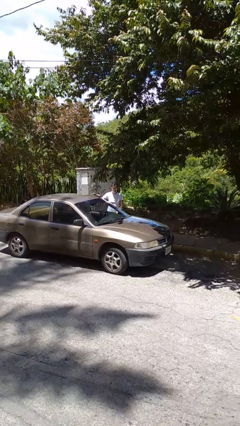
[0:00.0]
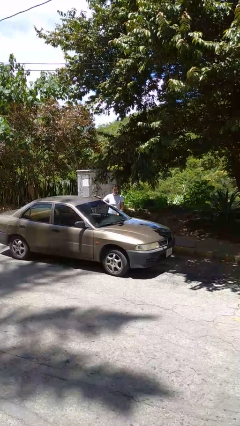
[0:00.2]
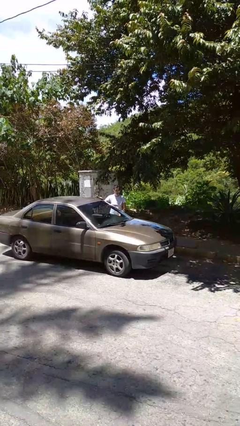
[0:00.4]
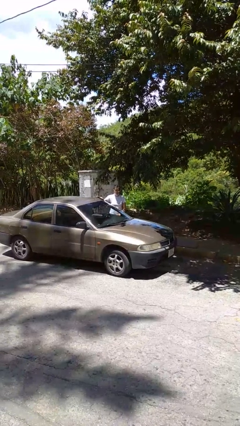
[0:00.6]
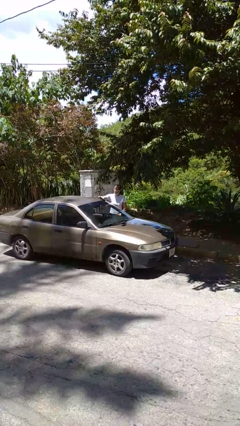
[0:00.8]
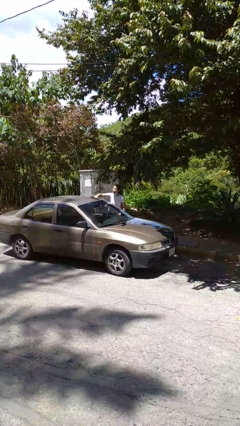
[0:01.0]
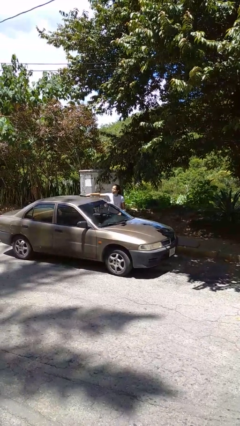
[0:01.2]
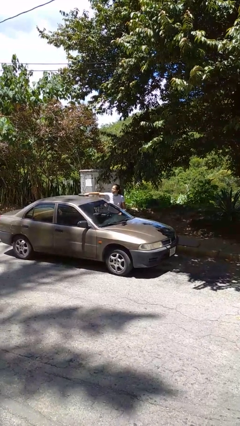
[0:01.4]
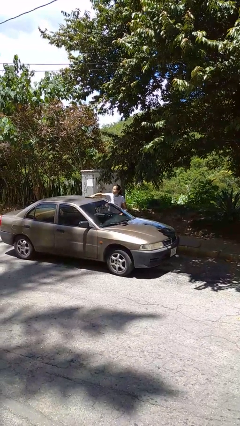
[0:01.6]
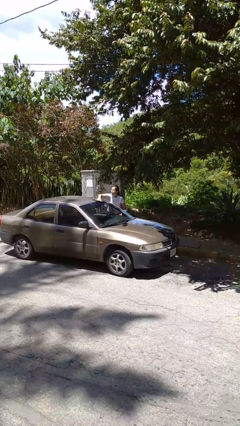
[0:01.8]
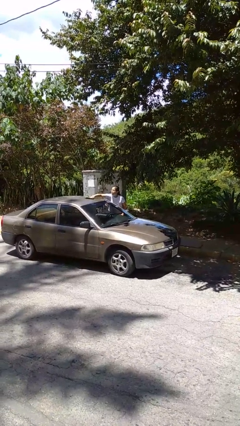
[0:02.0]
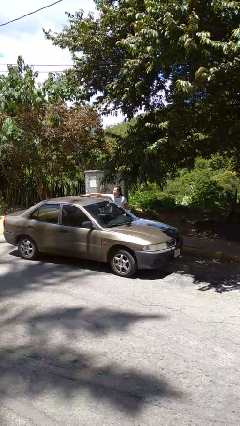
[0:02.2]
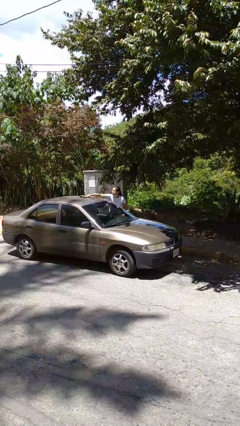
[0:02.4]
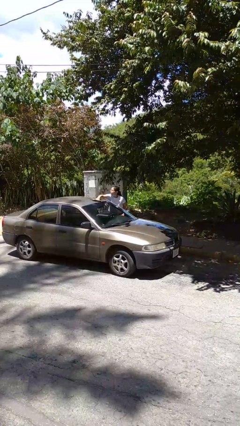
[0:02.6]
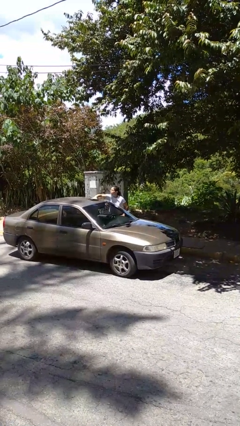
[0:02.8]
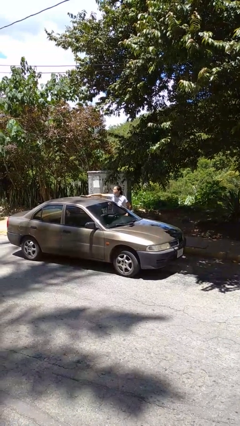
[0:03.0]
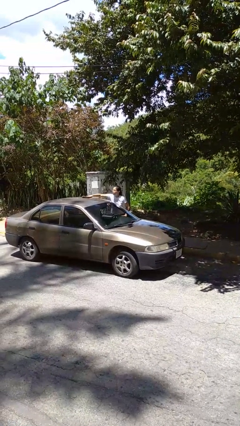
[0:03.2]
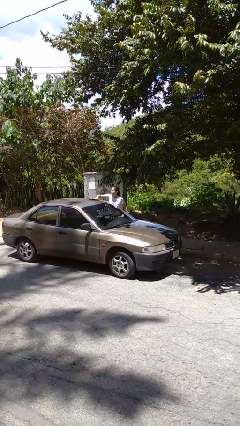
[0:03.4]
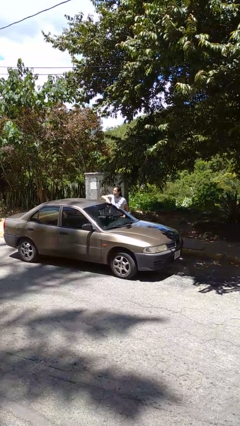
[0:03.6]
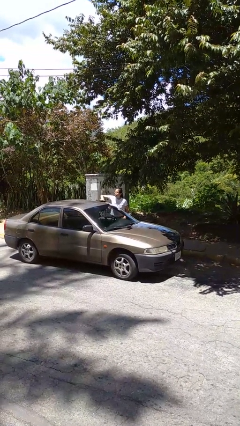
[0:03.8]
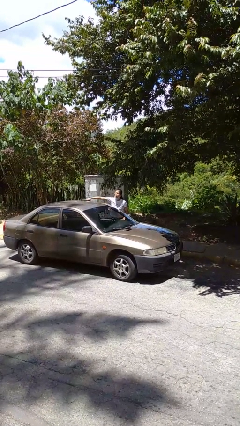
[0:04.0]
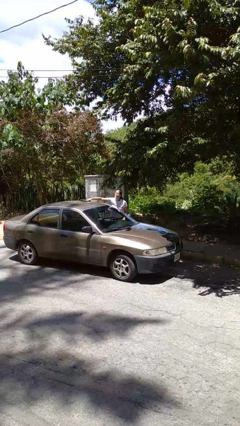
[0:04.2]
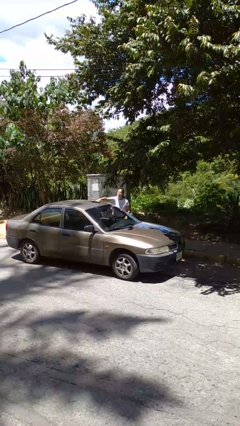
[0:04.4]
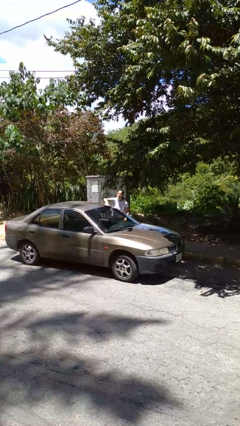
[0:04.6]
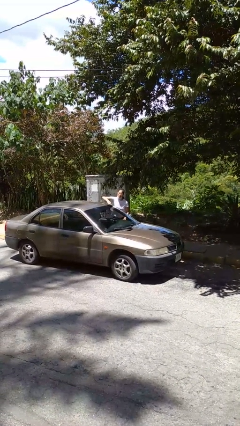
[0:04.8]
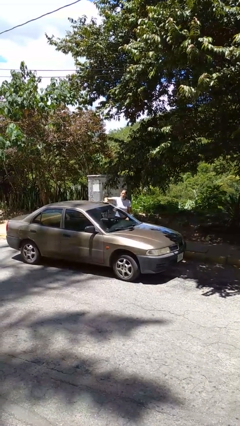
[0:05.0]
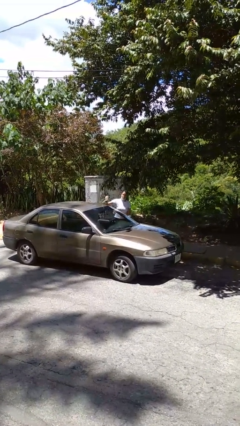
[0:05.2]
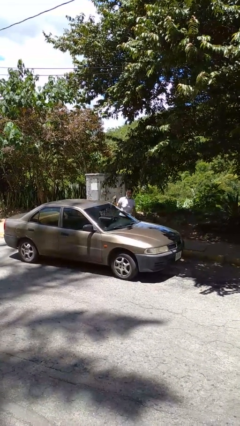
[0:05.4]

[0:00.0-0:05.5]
person polishes car with rag

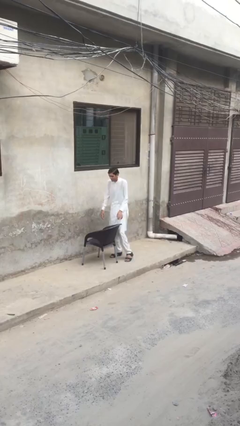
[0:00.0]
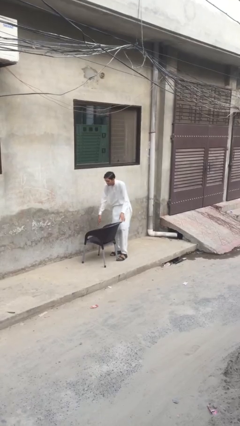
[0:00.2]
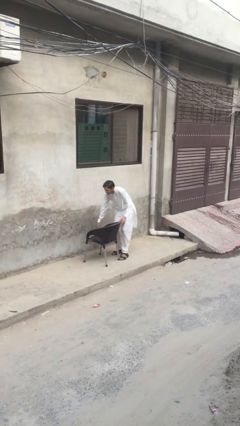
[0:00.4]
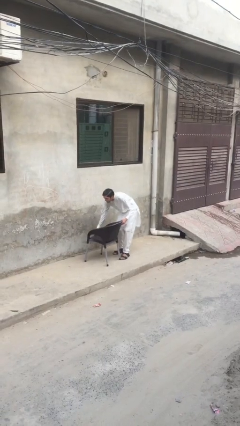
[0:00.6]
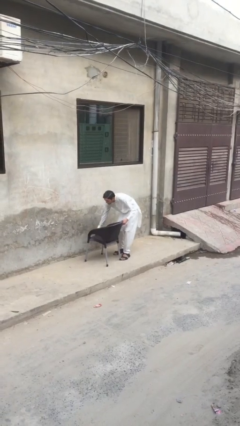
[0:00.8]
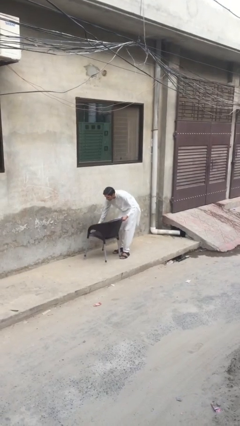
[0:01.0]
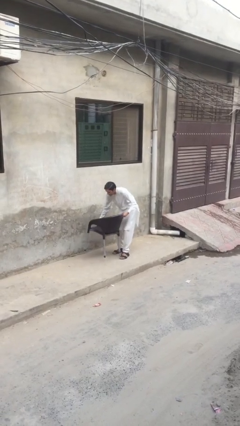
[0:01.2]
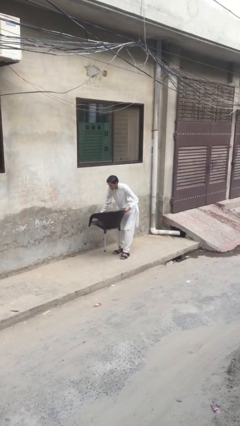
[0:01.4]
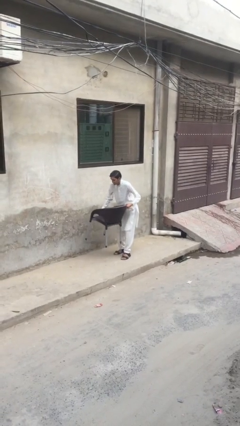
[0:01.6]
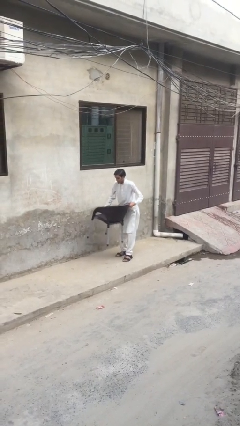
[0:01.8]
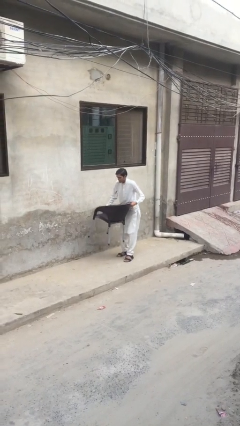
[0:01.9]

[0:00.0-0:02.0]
person picks up object from floor

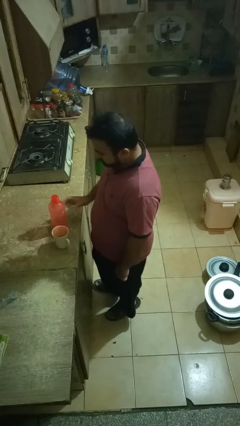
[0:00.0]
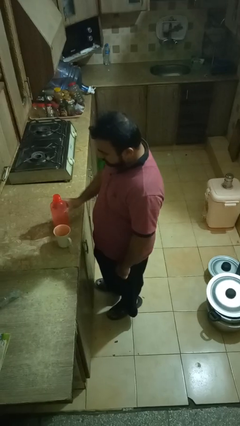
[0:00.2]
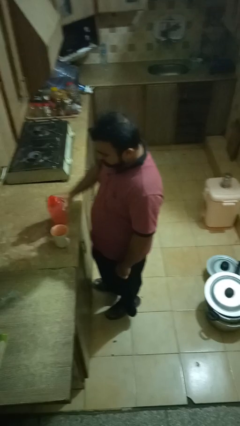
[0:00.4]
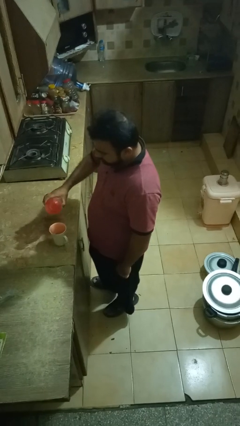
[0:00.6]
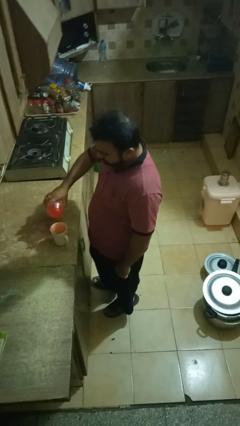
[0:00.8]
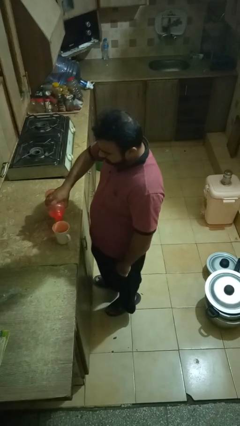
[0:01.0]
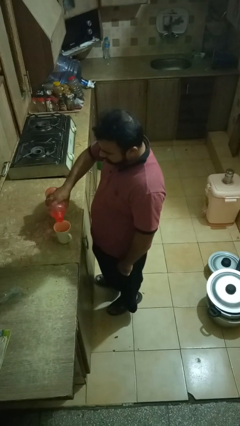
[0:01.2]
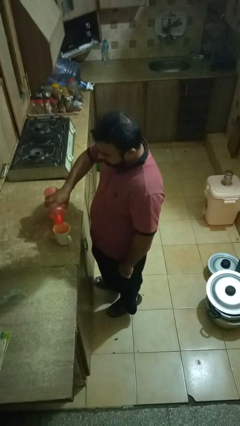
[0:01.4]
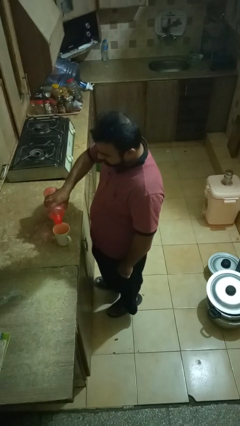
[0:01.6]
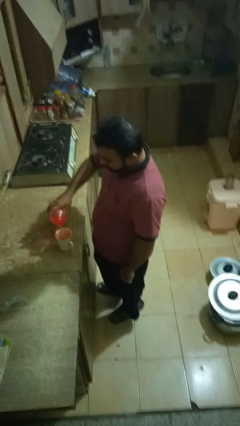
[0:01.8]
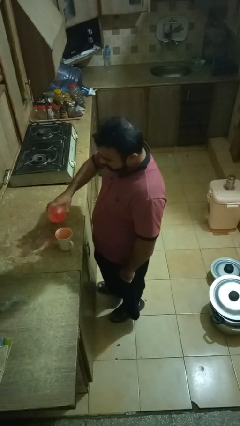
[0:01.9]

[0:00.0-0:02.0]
person pours liquid into cup

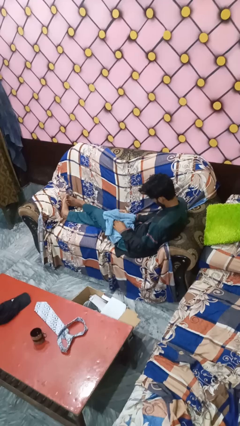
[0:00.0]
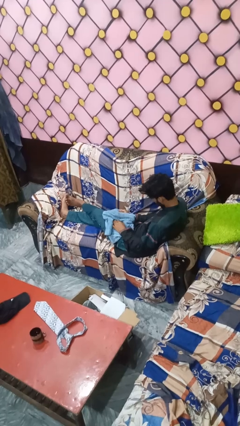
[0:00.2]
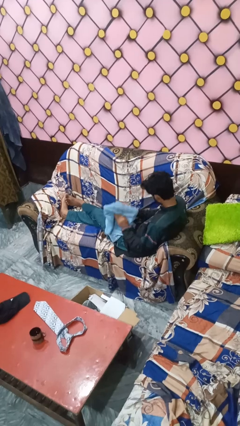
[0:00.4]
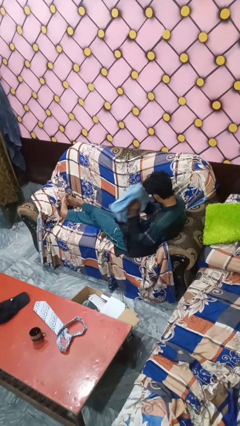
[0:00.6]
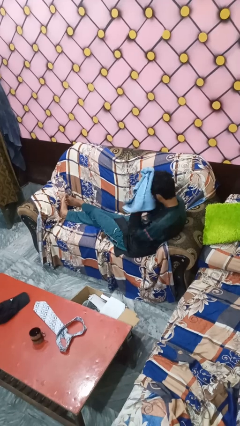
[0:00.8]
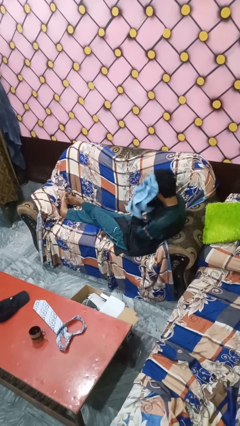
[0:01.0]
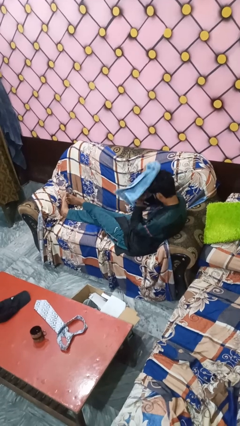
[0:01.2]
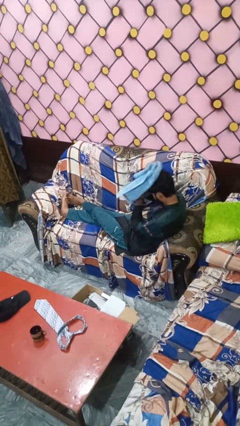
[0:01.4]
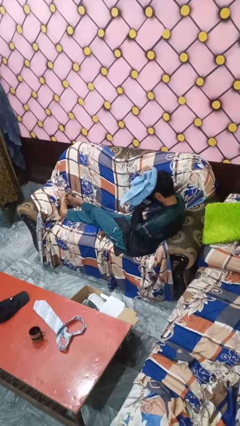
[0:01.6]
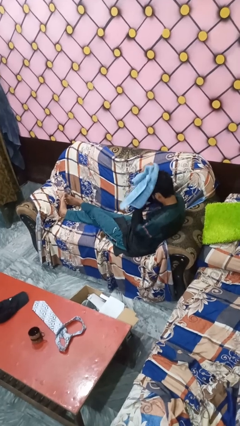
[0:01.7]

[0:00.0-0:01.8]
person dries hair with towel

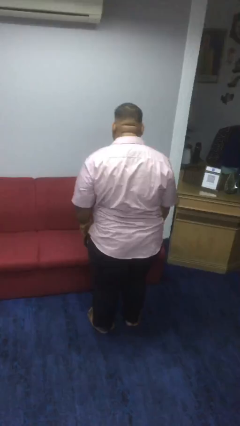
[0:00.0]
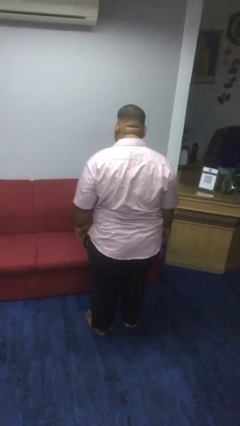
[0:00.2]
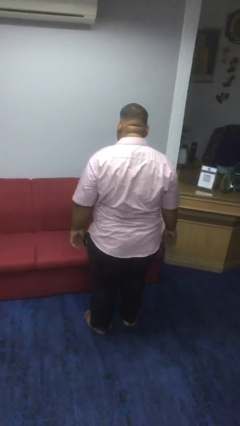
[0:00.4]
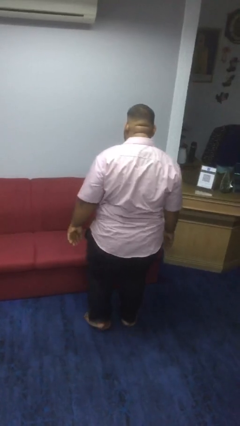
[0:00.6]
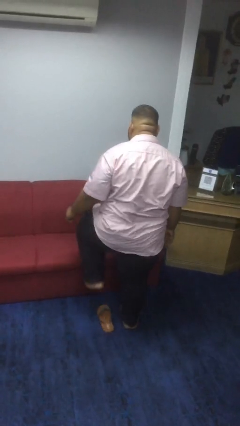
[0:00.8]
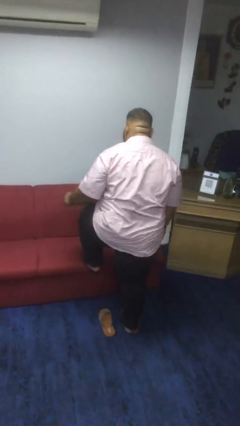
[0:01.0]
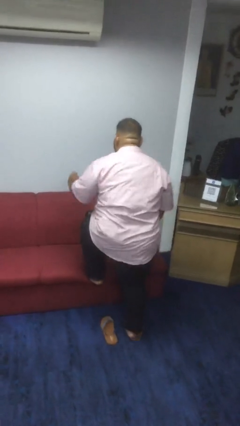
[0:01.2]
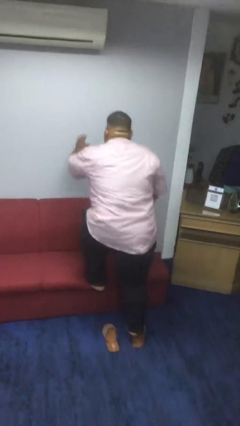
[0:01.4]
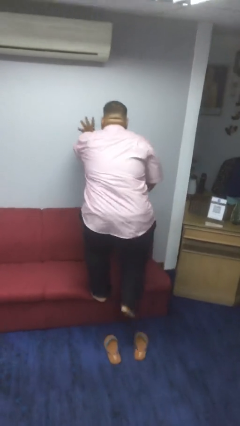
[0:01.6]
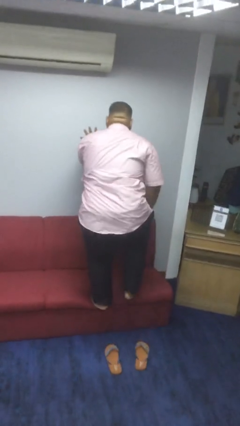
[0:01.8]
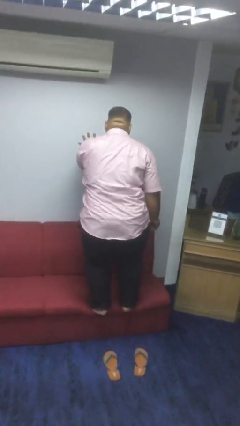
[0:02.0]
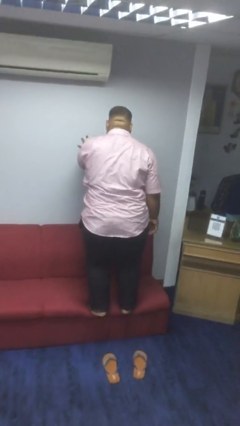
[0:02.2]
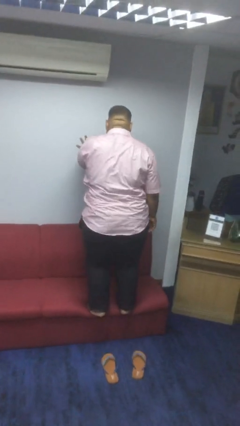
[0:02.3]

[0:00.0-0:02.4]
person climbs on couch

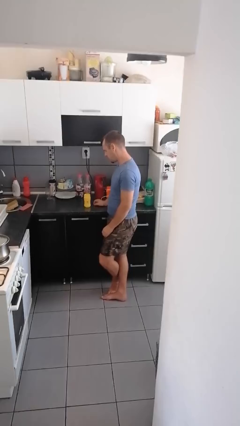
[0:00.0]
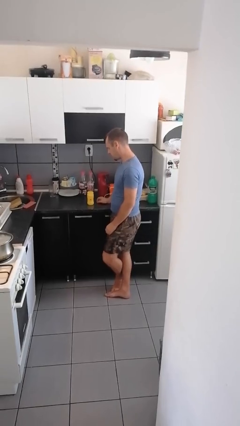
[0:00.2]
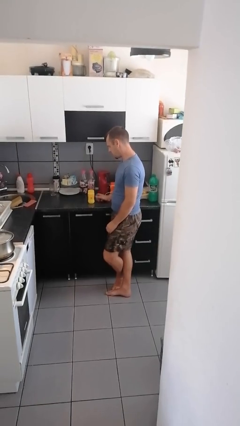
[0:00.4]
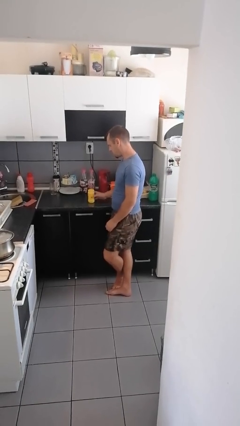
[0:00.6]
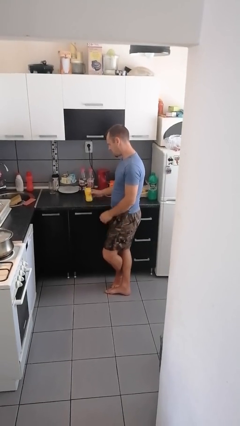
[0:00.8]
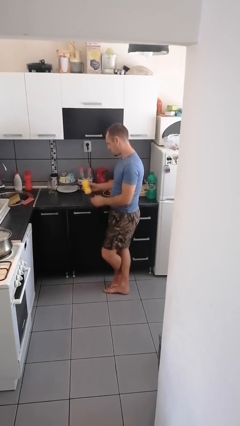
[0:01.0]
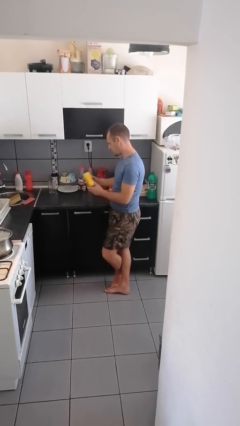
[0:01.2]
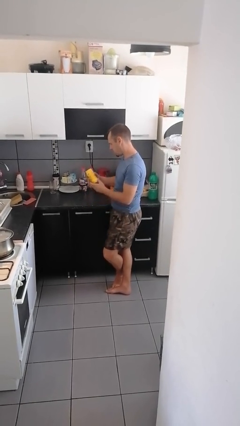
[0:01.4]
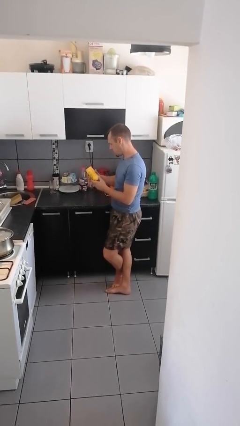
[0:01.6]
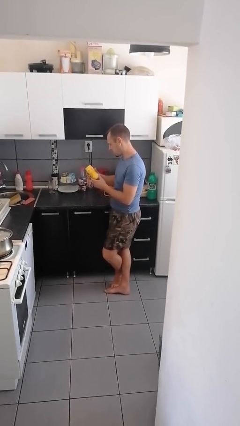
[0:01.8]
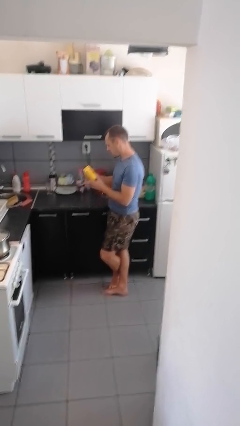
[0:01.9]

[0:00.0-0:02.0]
person picks up object from countertop

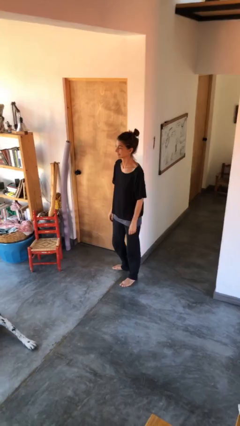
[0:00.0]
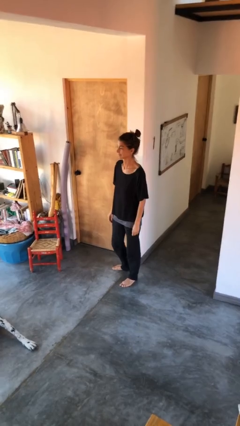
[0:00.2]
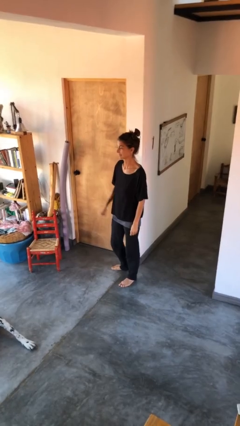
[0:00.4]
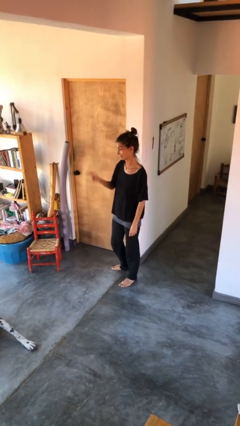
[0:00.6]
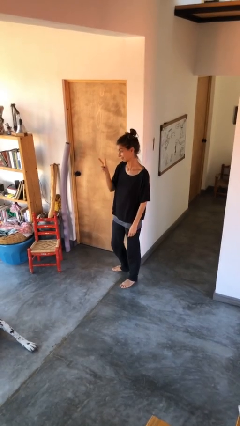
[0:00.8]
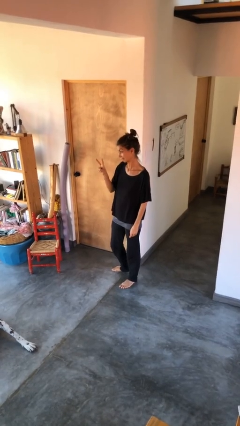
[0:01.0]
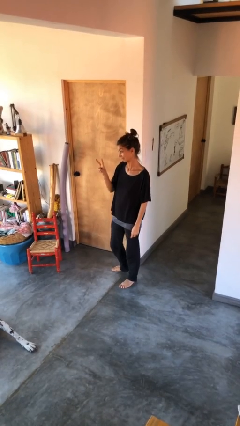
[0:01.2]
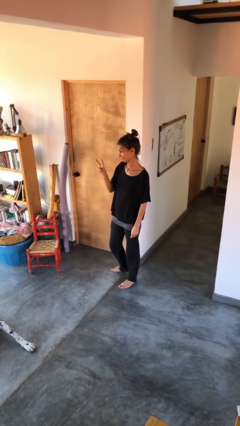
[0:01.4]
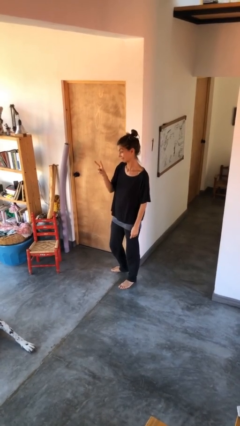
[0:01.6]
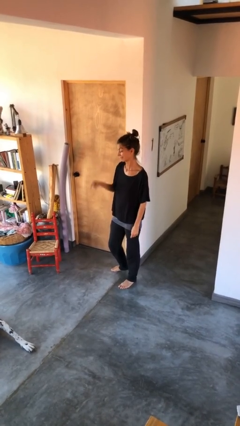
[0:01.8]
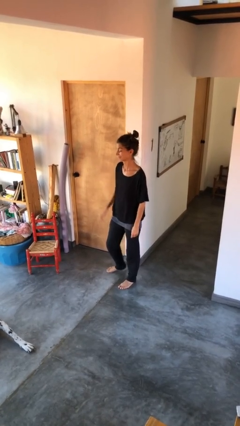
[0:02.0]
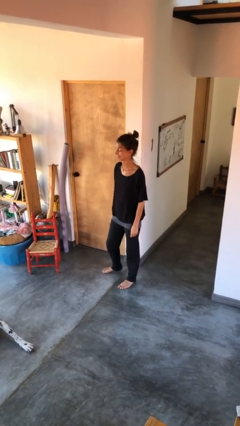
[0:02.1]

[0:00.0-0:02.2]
person gestures peace
